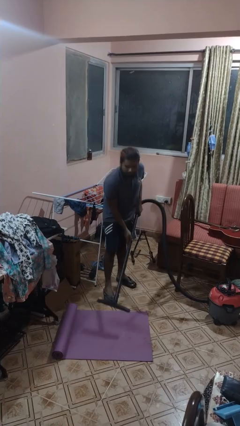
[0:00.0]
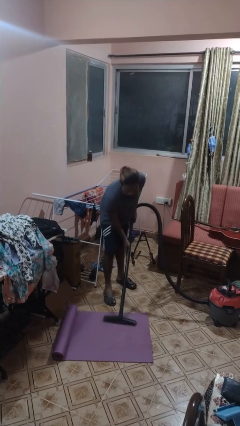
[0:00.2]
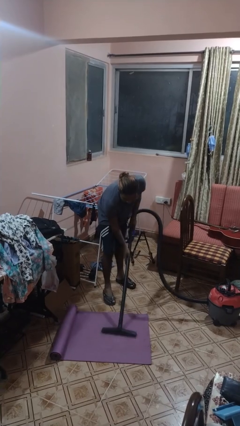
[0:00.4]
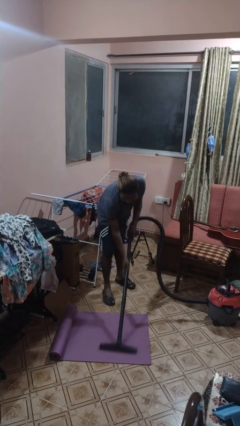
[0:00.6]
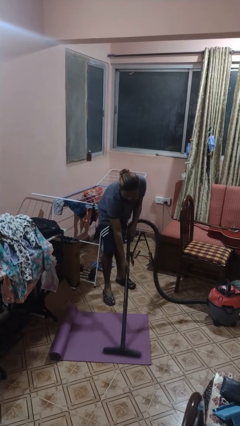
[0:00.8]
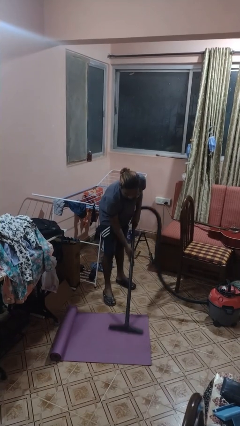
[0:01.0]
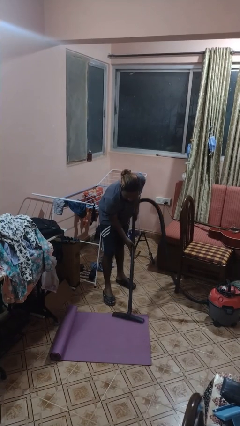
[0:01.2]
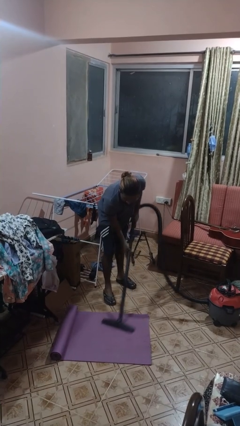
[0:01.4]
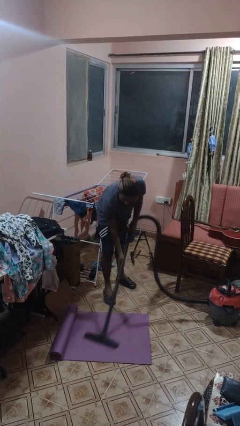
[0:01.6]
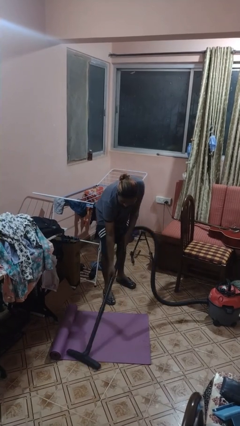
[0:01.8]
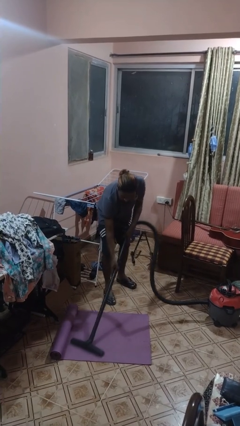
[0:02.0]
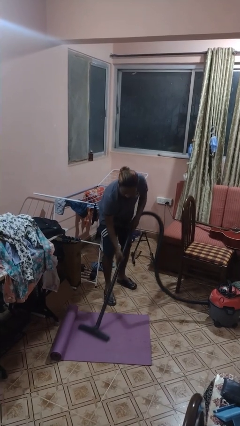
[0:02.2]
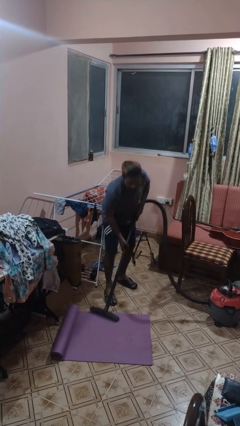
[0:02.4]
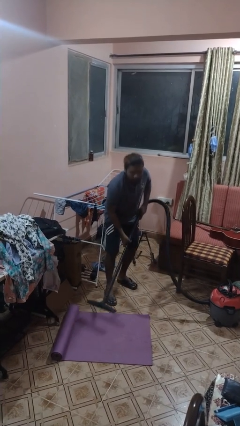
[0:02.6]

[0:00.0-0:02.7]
person vacuums carpet

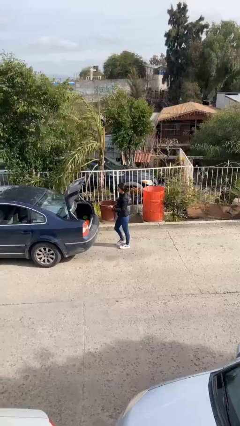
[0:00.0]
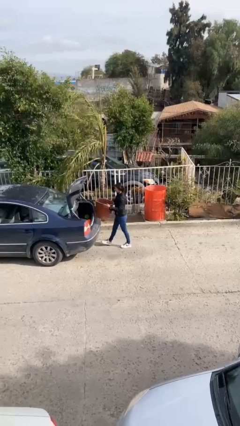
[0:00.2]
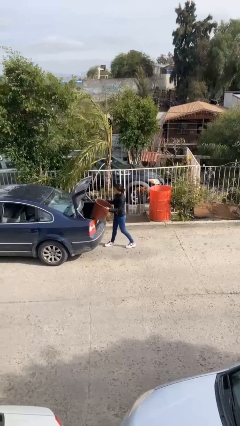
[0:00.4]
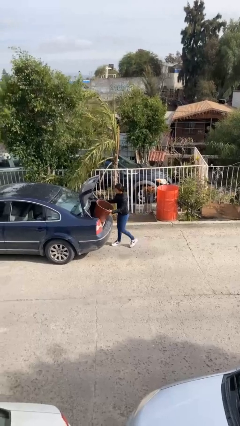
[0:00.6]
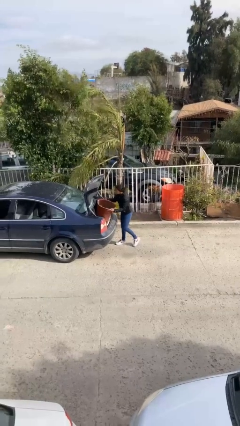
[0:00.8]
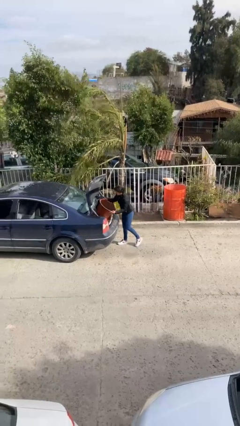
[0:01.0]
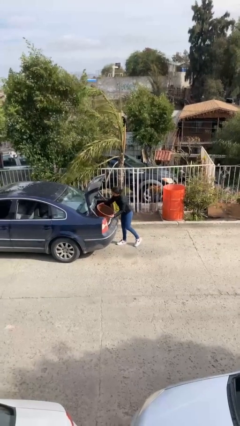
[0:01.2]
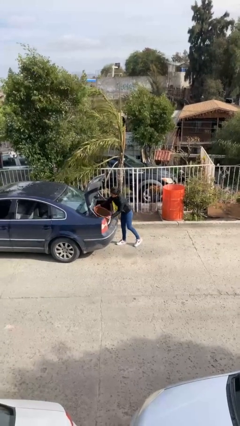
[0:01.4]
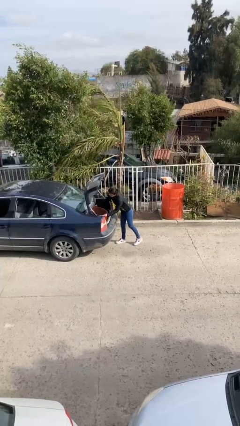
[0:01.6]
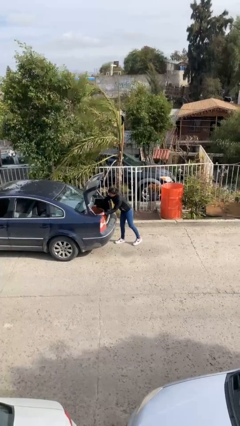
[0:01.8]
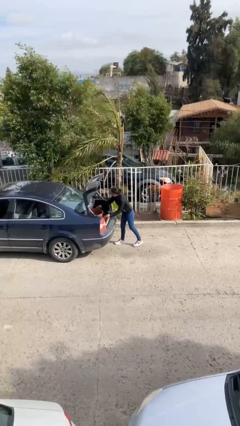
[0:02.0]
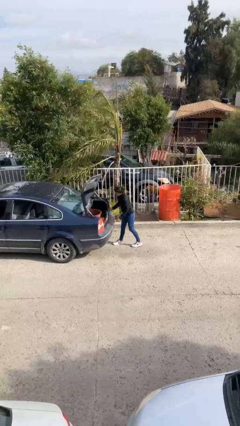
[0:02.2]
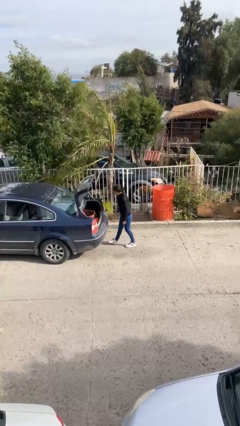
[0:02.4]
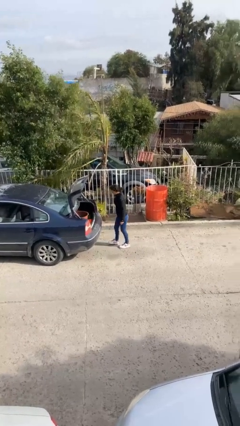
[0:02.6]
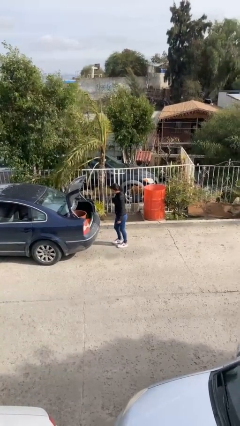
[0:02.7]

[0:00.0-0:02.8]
person loads car

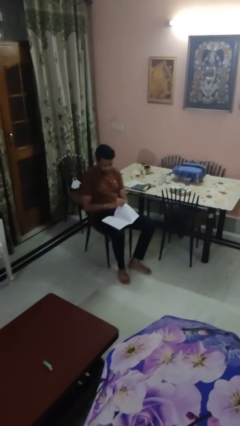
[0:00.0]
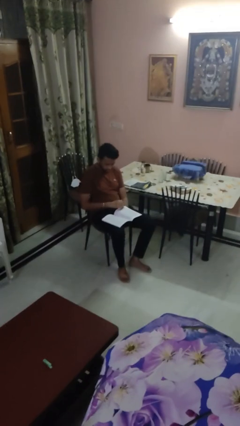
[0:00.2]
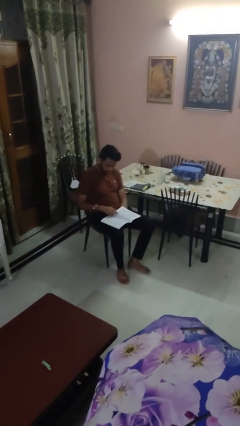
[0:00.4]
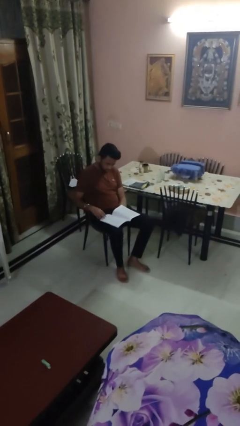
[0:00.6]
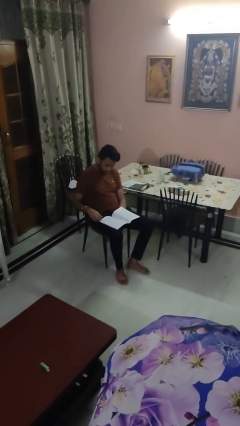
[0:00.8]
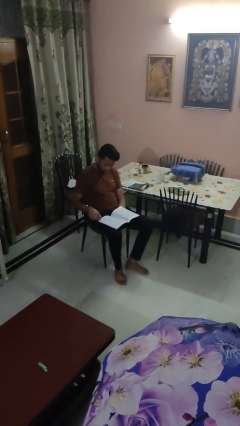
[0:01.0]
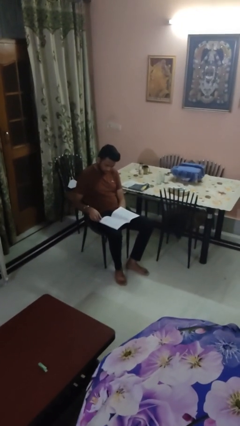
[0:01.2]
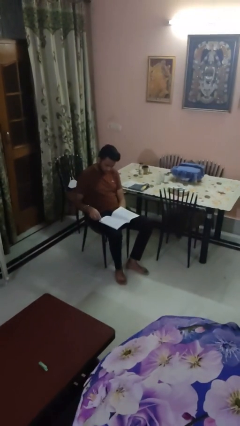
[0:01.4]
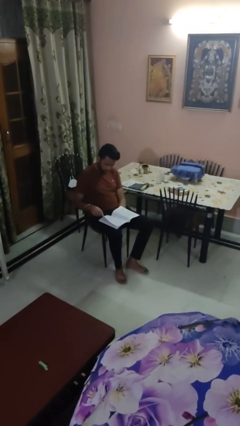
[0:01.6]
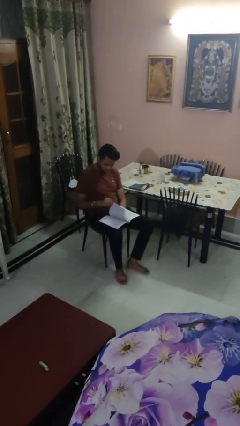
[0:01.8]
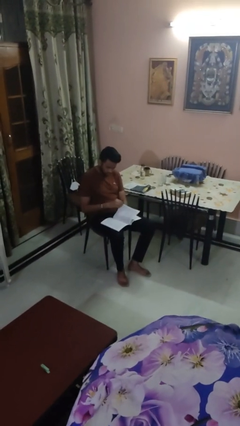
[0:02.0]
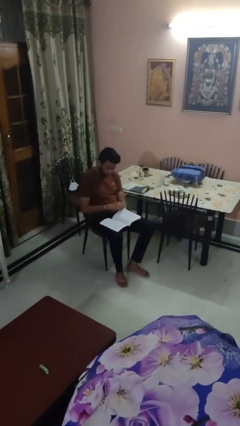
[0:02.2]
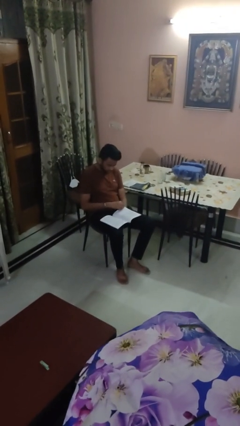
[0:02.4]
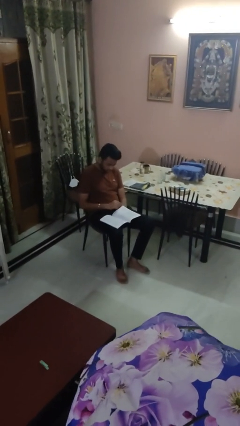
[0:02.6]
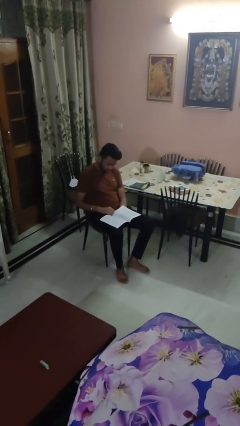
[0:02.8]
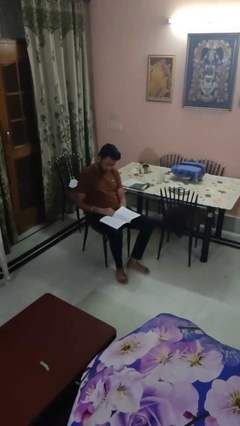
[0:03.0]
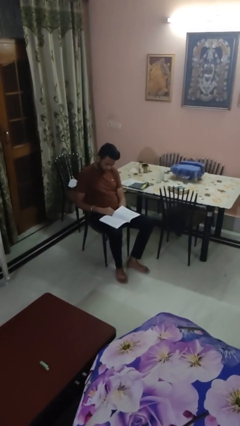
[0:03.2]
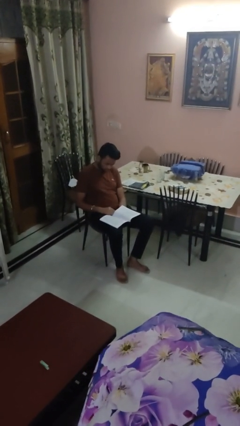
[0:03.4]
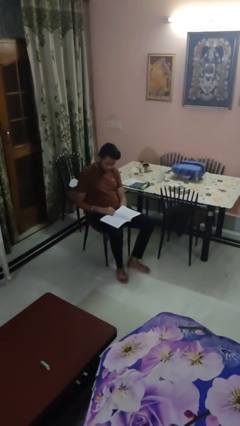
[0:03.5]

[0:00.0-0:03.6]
person reads magazine

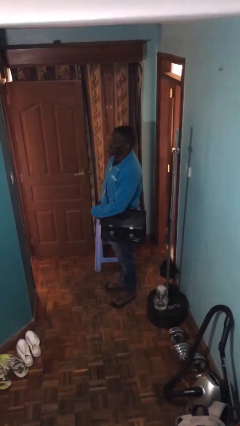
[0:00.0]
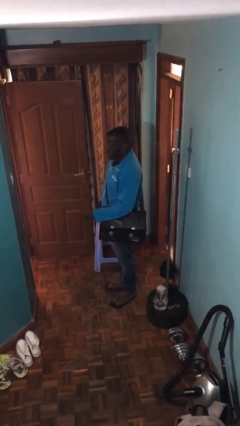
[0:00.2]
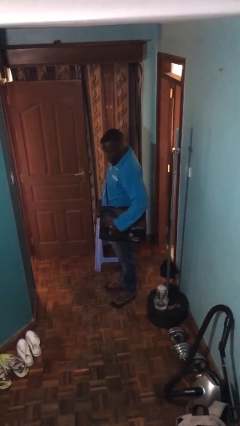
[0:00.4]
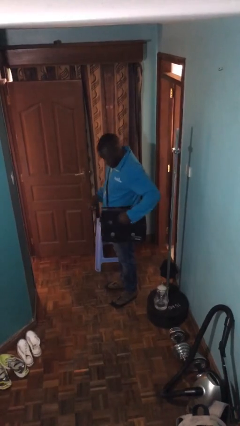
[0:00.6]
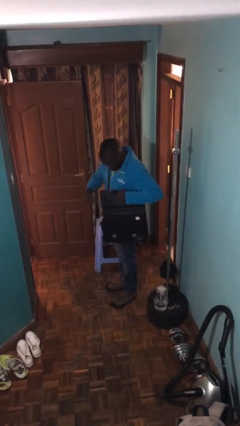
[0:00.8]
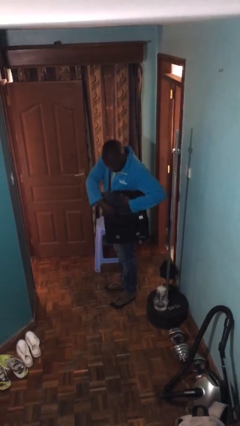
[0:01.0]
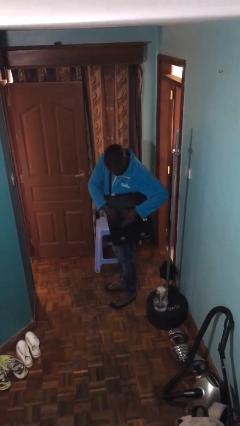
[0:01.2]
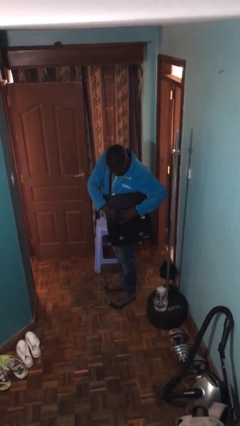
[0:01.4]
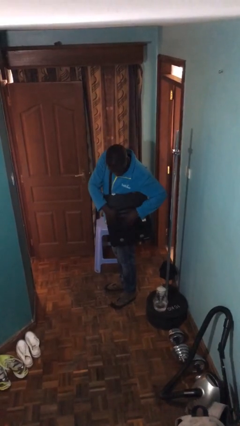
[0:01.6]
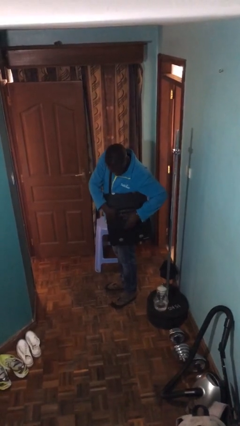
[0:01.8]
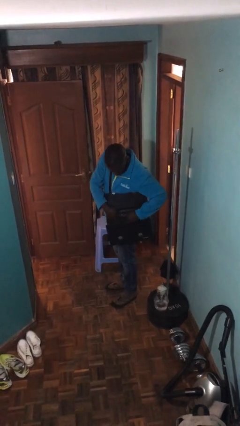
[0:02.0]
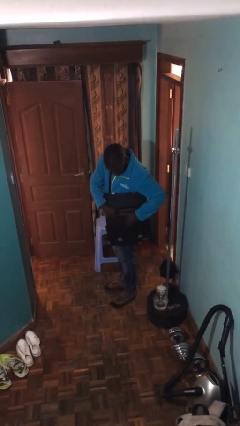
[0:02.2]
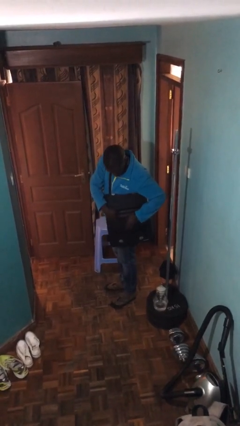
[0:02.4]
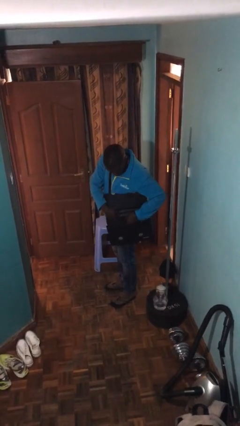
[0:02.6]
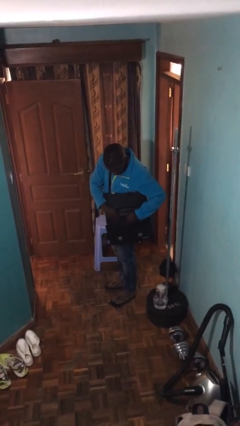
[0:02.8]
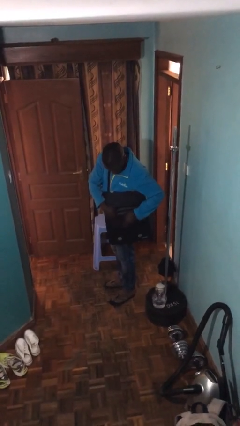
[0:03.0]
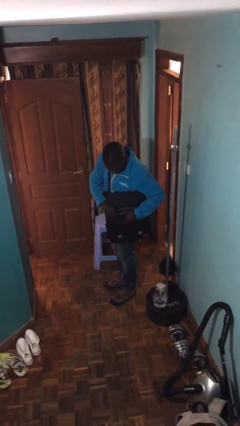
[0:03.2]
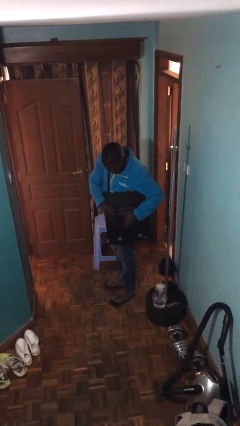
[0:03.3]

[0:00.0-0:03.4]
person searches in purse

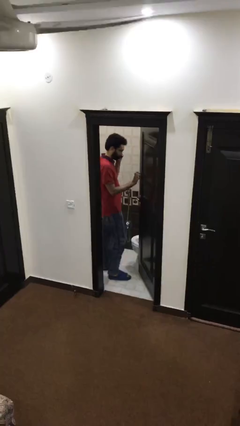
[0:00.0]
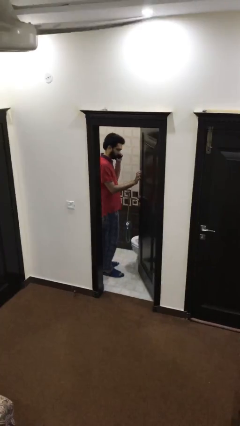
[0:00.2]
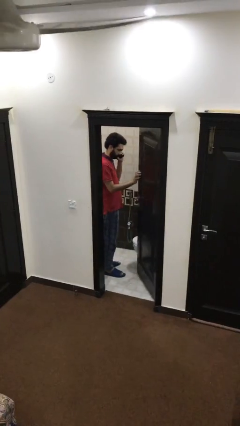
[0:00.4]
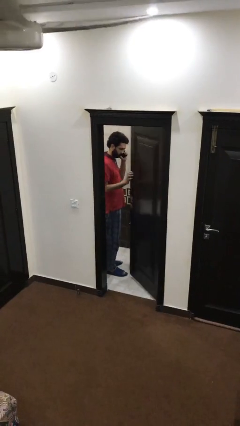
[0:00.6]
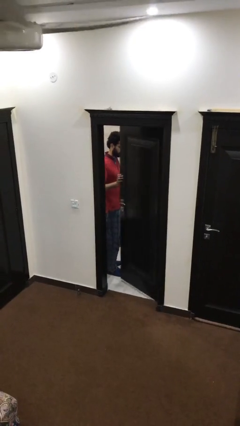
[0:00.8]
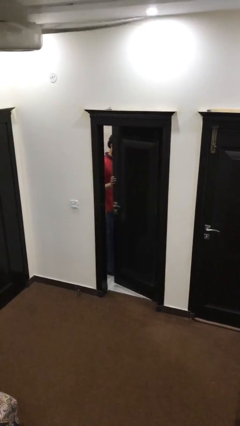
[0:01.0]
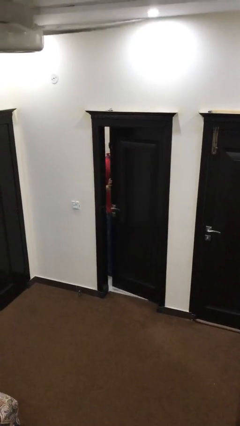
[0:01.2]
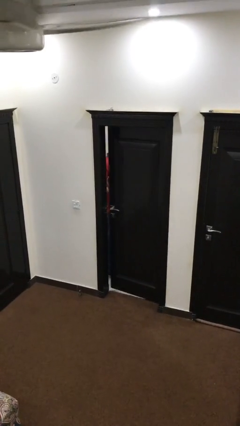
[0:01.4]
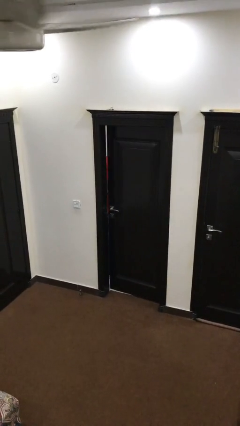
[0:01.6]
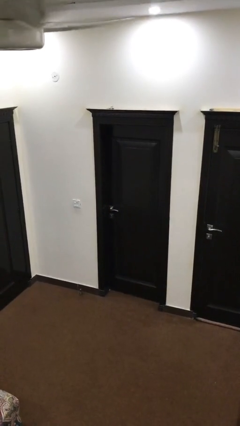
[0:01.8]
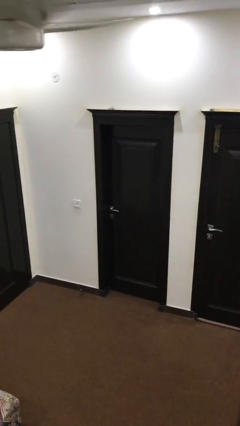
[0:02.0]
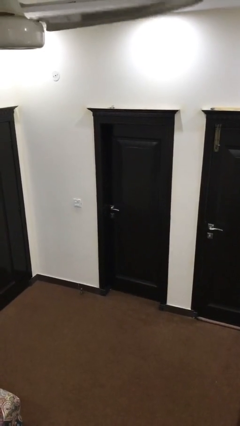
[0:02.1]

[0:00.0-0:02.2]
person closes facility door

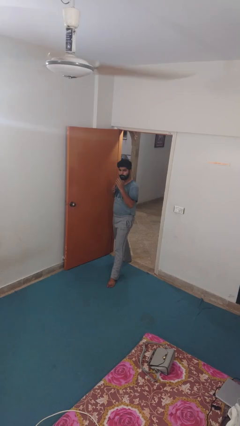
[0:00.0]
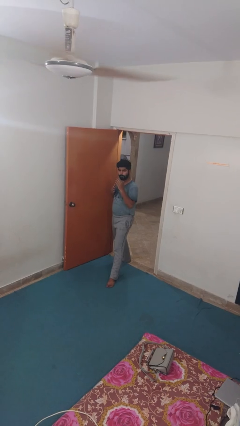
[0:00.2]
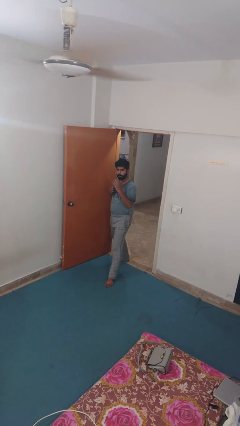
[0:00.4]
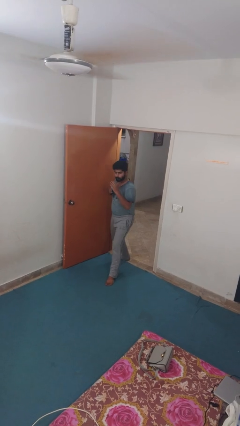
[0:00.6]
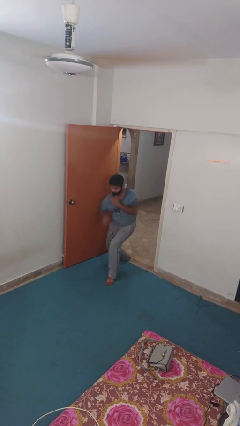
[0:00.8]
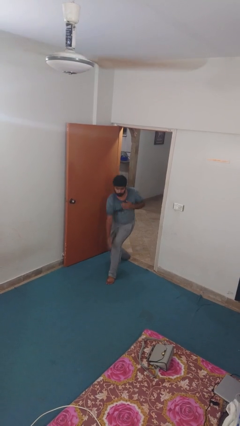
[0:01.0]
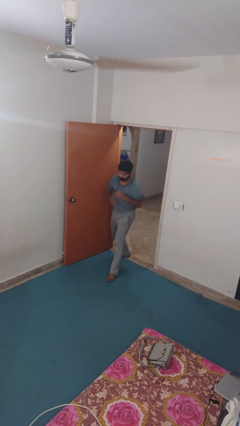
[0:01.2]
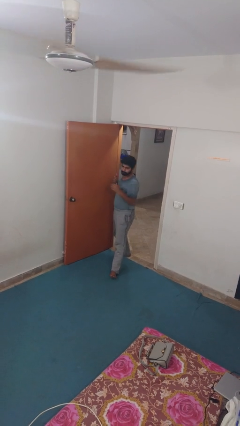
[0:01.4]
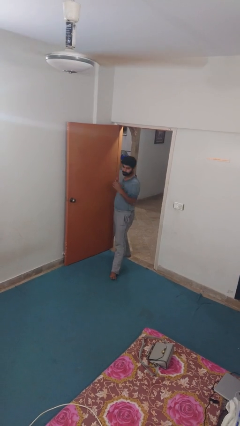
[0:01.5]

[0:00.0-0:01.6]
person karate chop

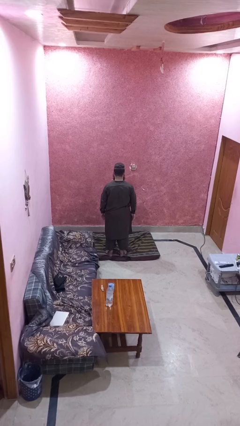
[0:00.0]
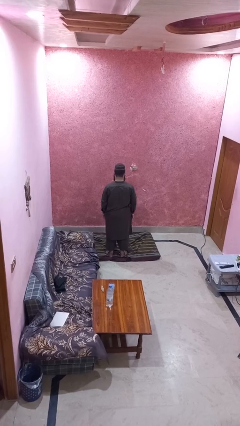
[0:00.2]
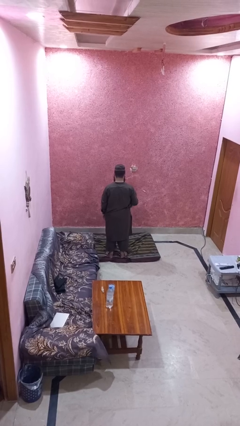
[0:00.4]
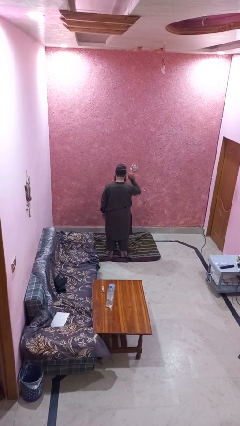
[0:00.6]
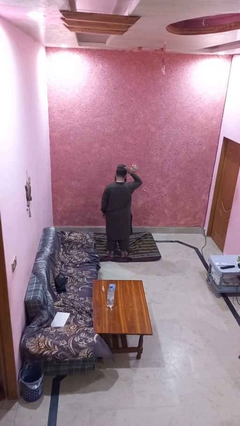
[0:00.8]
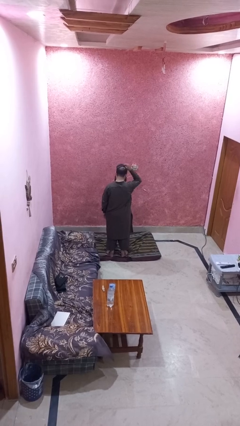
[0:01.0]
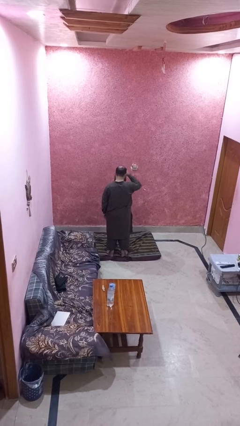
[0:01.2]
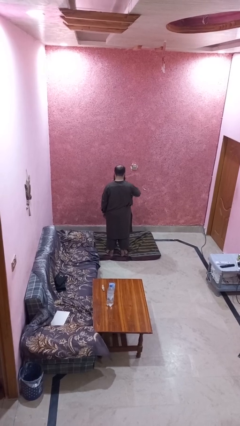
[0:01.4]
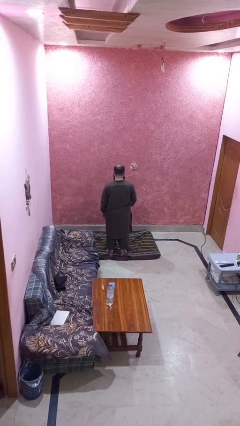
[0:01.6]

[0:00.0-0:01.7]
person takes off hat
